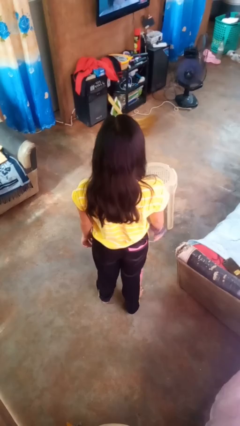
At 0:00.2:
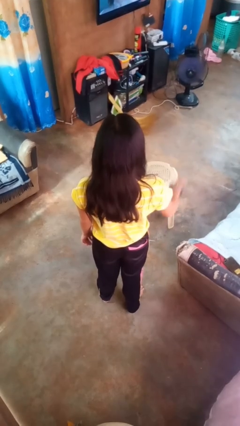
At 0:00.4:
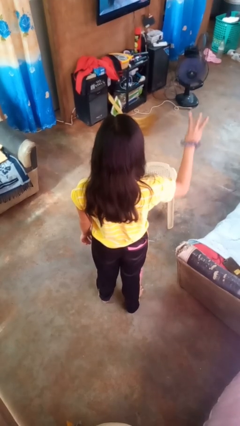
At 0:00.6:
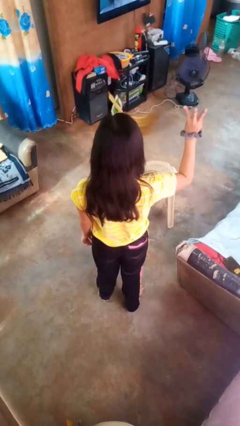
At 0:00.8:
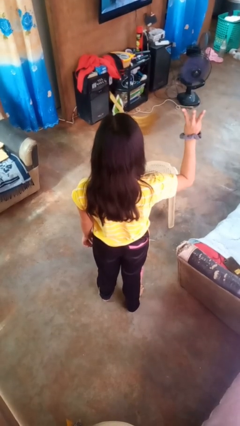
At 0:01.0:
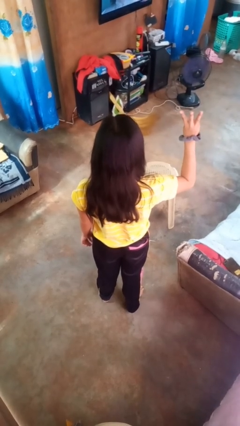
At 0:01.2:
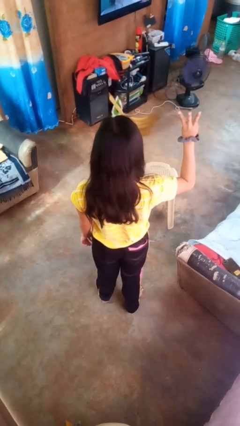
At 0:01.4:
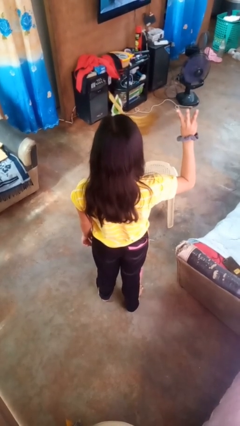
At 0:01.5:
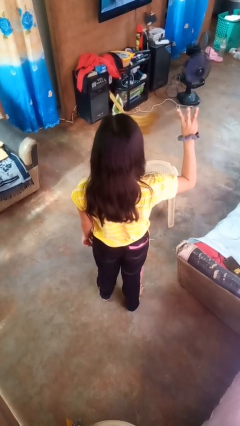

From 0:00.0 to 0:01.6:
person gestures number three

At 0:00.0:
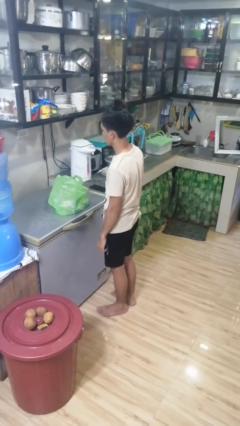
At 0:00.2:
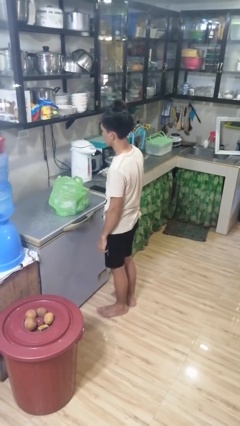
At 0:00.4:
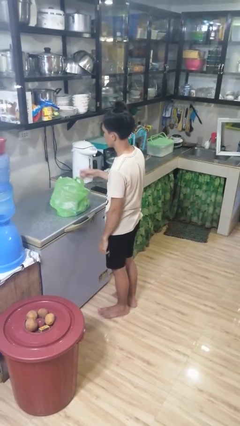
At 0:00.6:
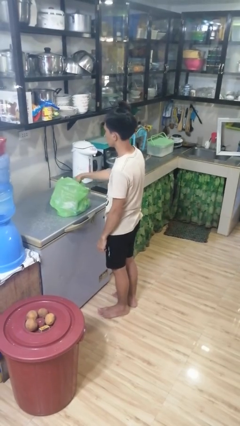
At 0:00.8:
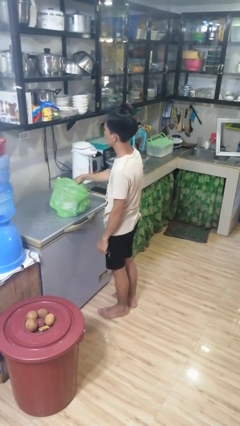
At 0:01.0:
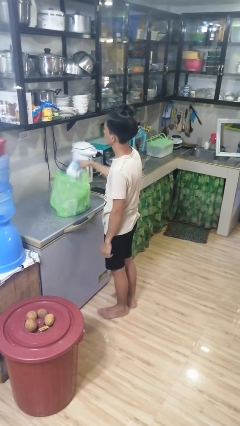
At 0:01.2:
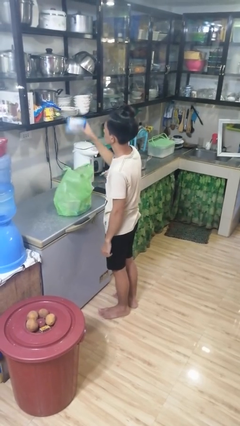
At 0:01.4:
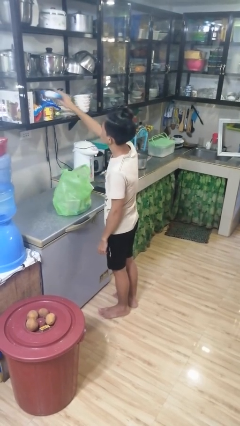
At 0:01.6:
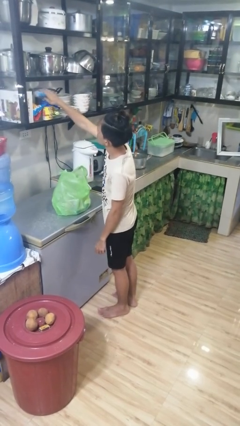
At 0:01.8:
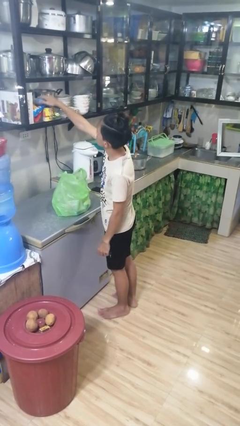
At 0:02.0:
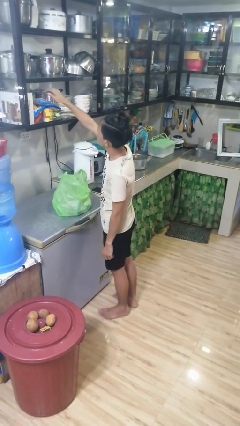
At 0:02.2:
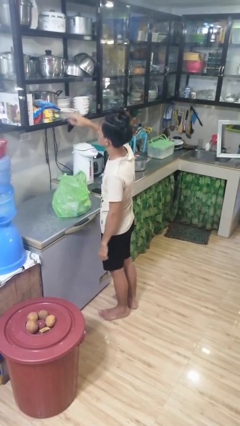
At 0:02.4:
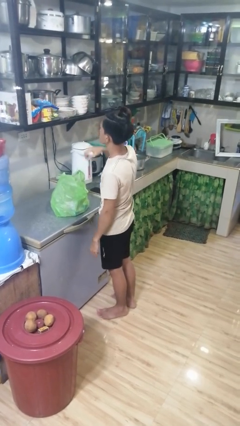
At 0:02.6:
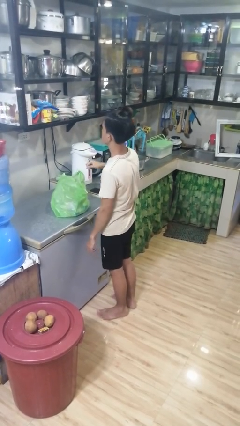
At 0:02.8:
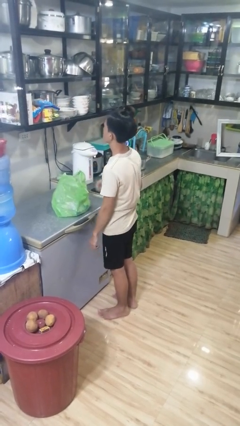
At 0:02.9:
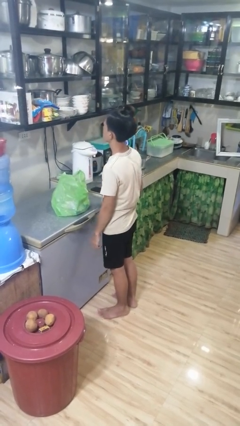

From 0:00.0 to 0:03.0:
person loads groceries into cabinet

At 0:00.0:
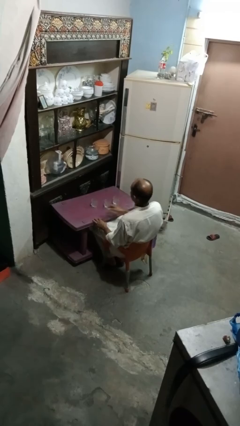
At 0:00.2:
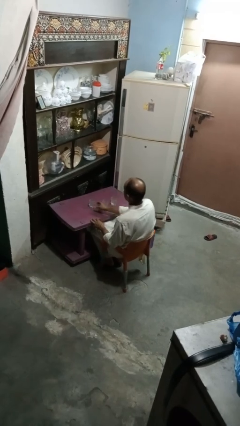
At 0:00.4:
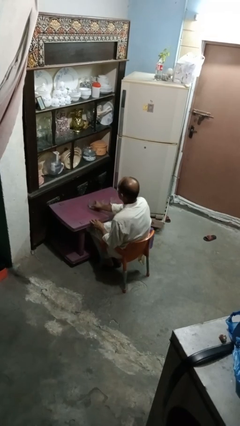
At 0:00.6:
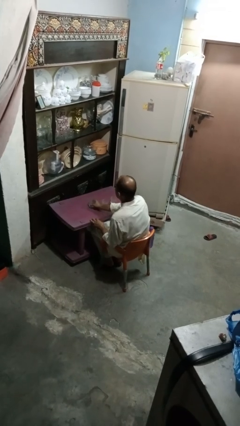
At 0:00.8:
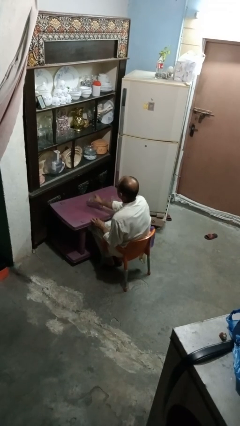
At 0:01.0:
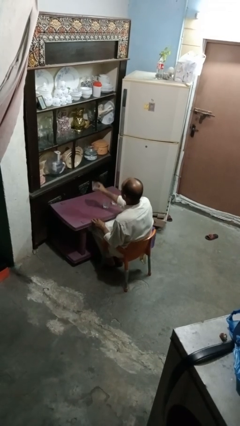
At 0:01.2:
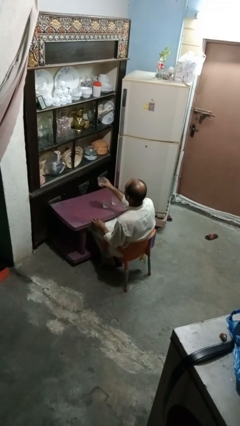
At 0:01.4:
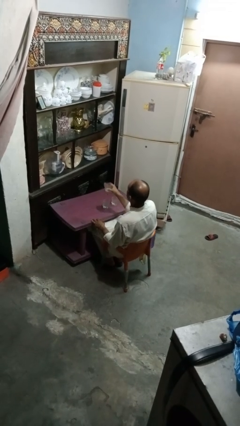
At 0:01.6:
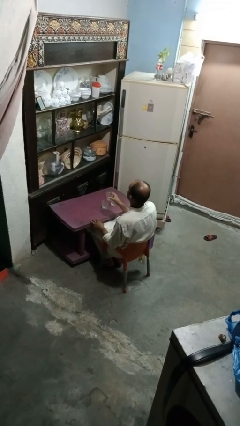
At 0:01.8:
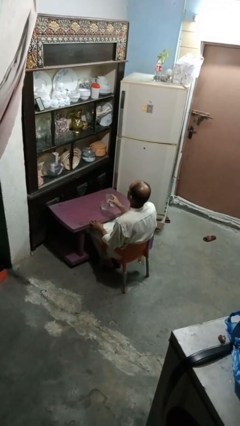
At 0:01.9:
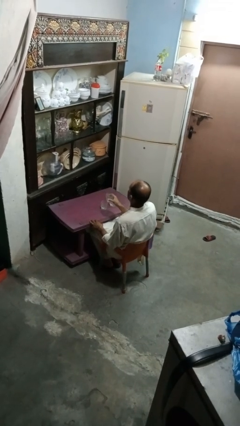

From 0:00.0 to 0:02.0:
person picks up object from table

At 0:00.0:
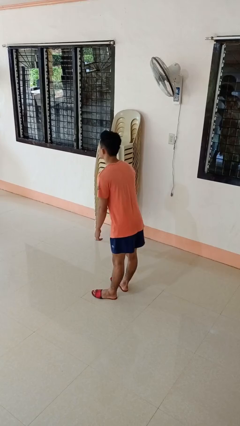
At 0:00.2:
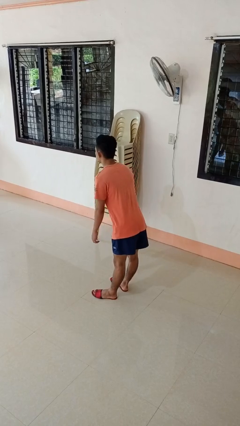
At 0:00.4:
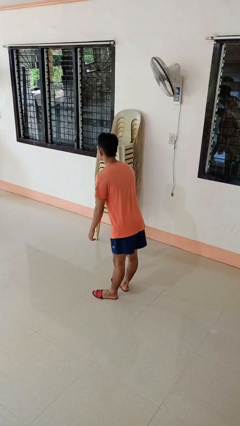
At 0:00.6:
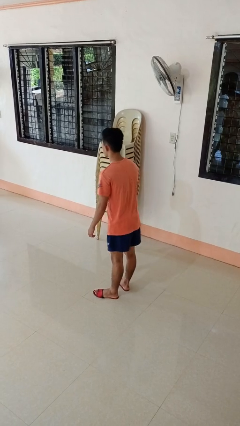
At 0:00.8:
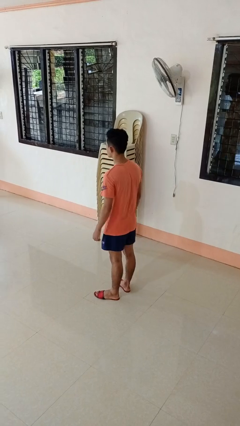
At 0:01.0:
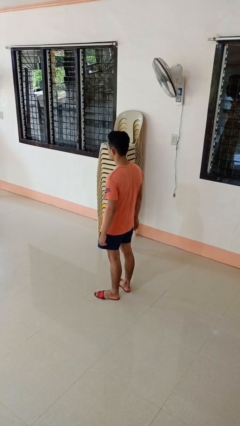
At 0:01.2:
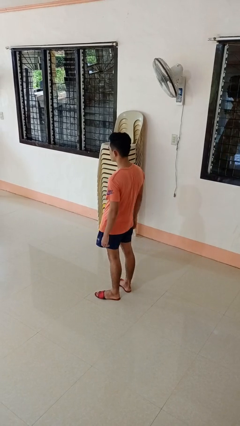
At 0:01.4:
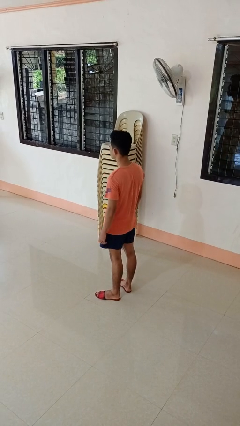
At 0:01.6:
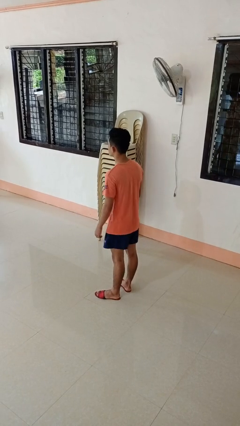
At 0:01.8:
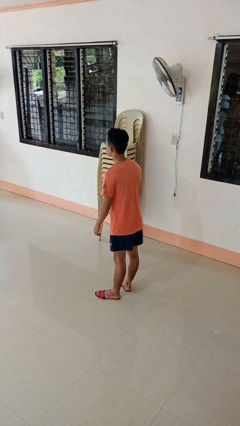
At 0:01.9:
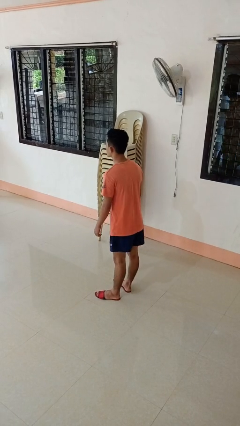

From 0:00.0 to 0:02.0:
person wiggles hips

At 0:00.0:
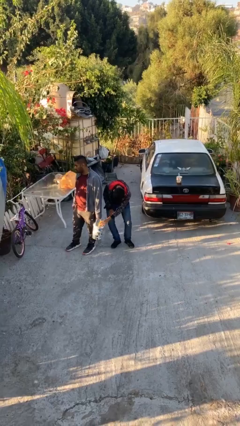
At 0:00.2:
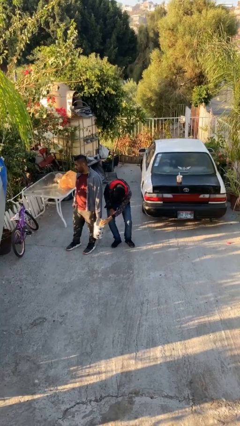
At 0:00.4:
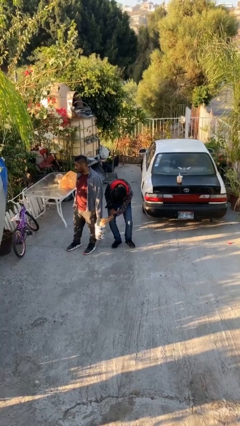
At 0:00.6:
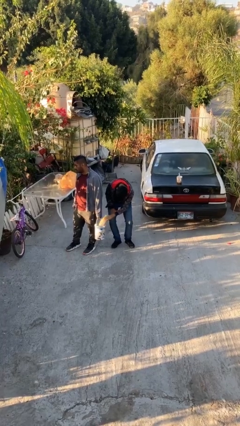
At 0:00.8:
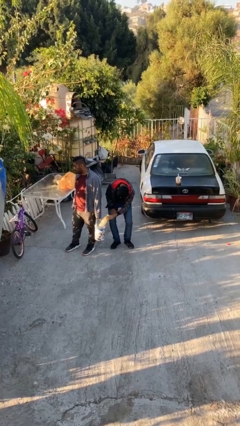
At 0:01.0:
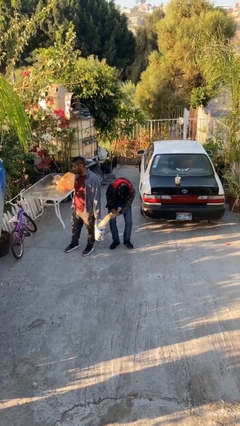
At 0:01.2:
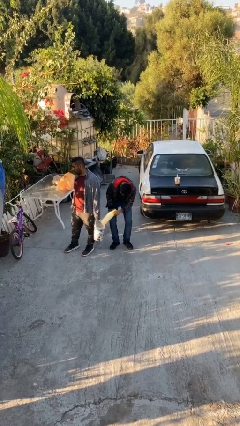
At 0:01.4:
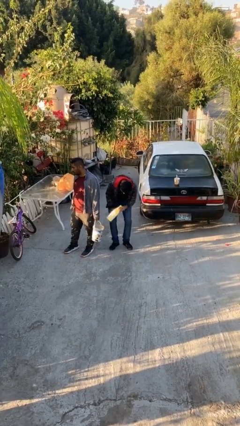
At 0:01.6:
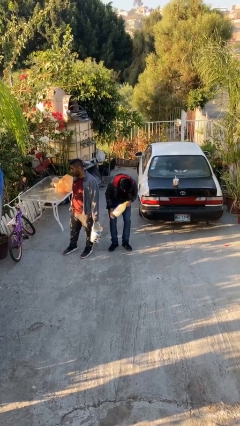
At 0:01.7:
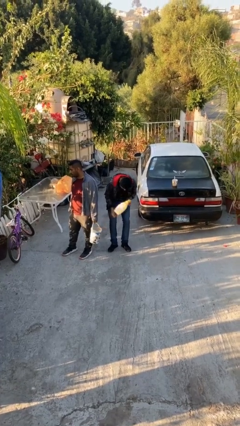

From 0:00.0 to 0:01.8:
person steals object from person

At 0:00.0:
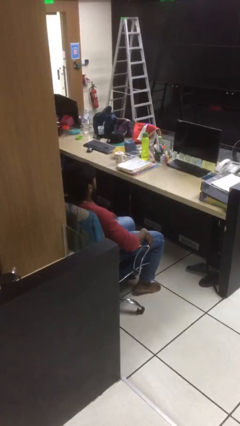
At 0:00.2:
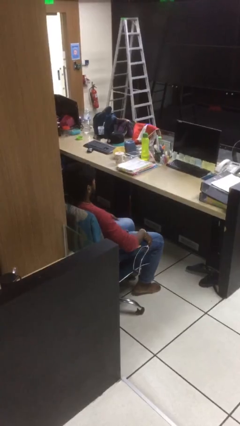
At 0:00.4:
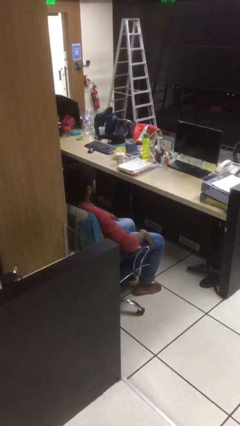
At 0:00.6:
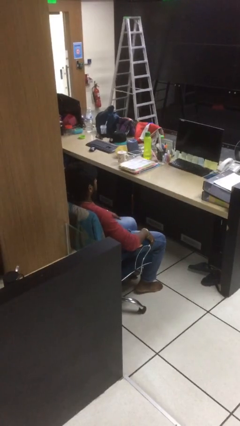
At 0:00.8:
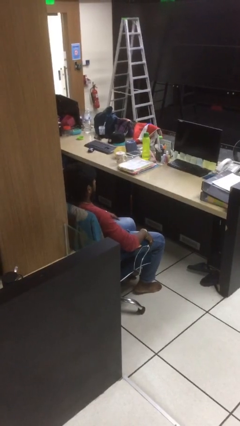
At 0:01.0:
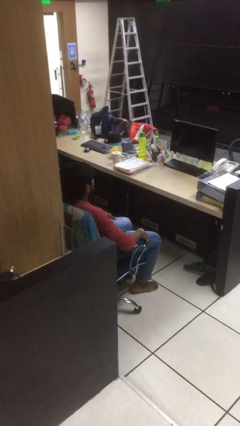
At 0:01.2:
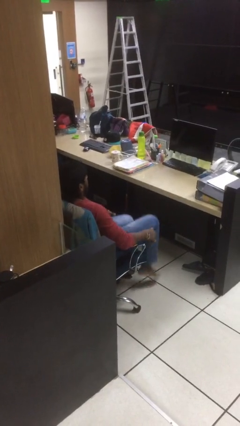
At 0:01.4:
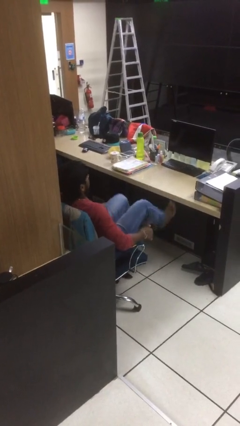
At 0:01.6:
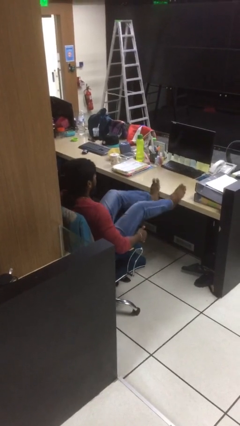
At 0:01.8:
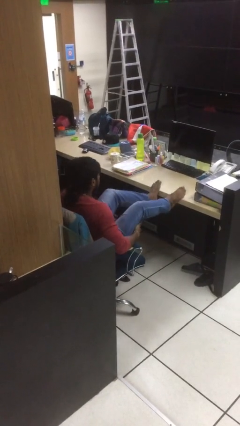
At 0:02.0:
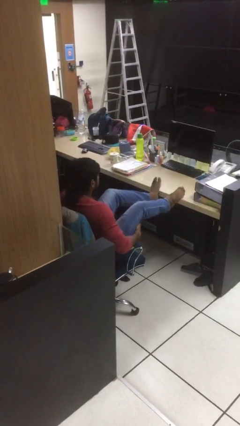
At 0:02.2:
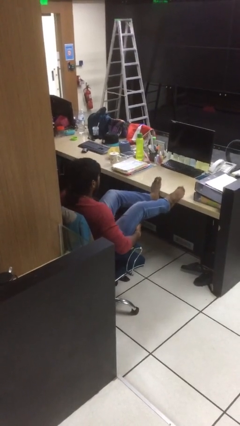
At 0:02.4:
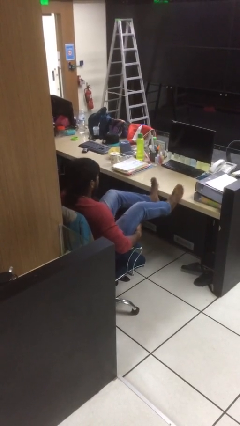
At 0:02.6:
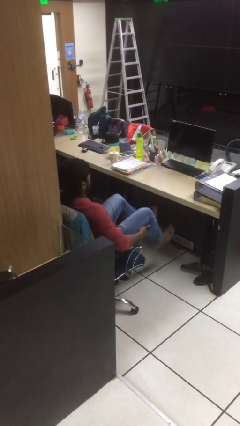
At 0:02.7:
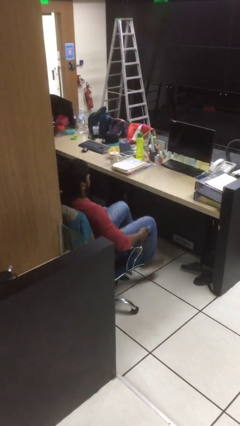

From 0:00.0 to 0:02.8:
person puts feet up

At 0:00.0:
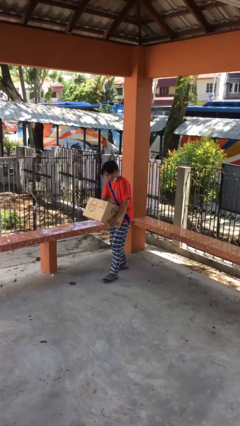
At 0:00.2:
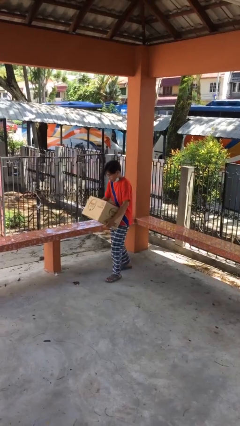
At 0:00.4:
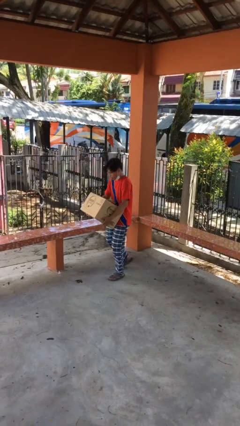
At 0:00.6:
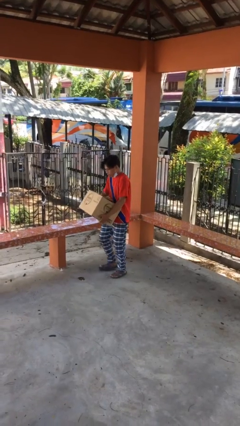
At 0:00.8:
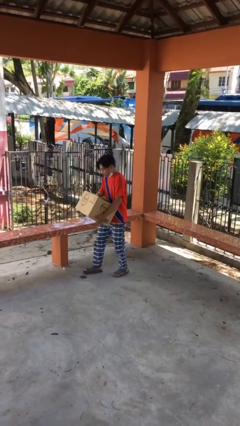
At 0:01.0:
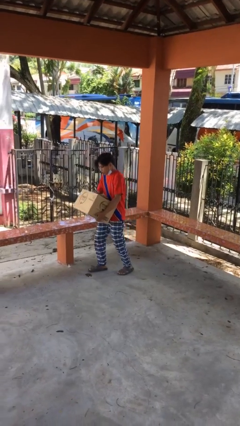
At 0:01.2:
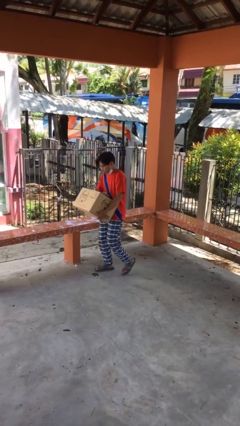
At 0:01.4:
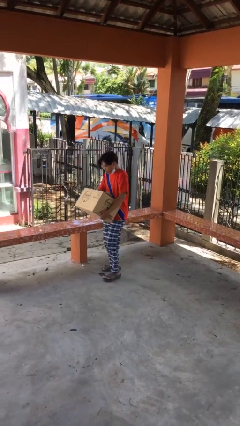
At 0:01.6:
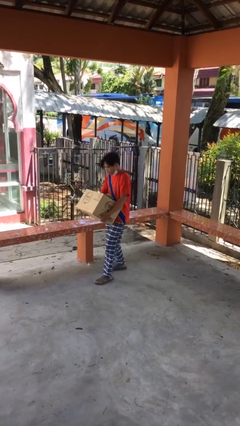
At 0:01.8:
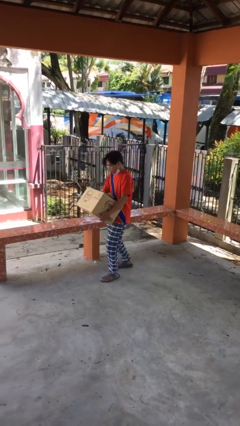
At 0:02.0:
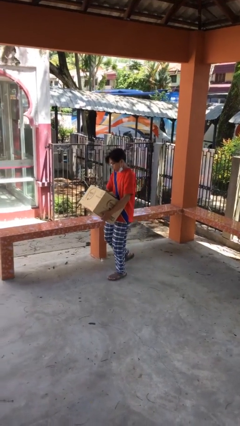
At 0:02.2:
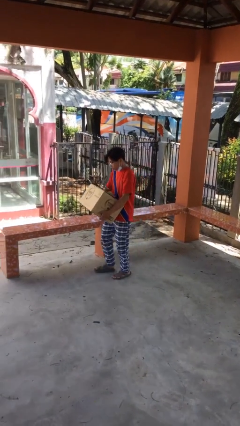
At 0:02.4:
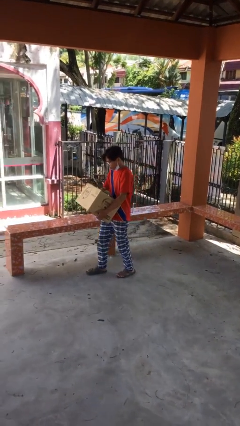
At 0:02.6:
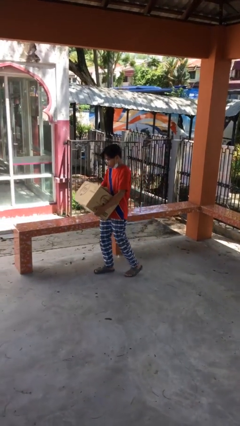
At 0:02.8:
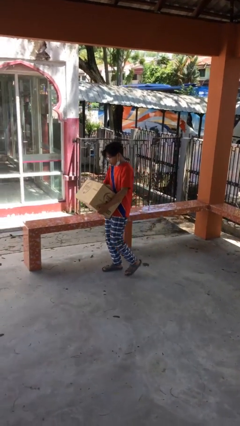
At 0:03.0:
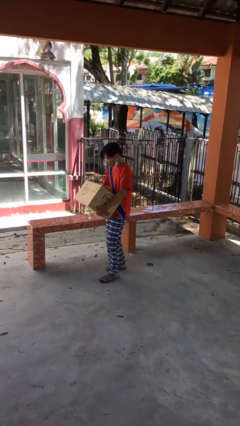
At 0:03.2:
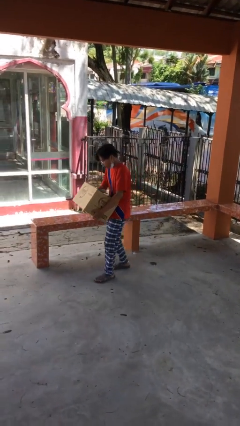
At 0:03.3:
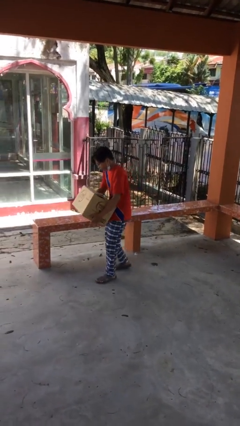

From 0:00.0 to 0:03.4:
person carries heavy object

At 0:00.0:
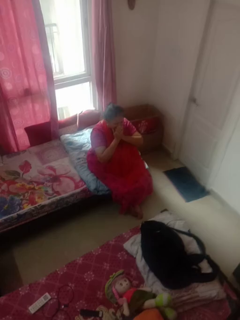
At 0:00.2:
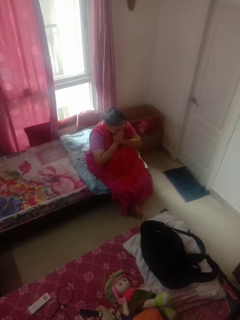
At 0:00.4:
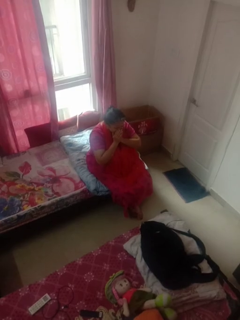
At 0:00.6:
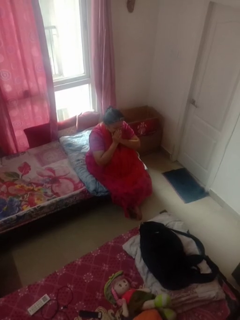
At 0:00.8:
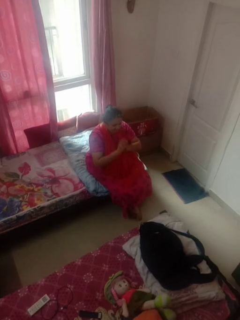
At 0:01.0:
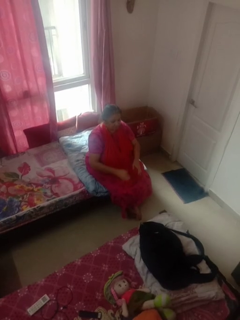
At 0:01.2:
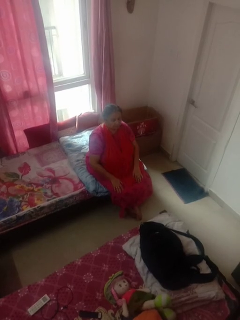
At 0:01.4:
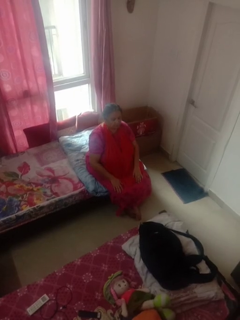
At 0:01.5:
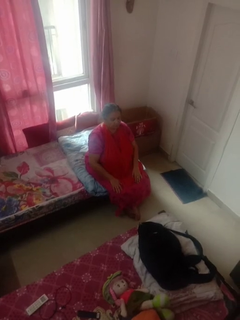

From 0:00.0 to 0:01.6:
person sneezes into hand
